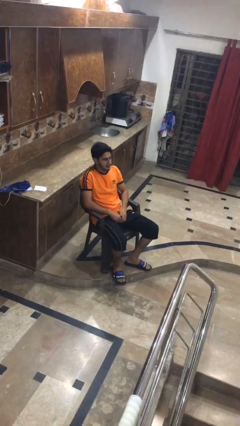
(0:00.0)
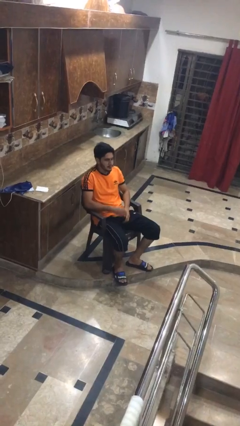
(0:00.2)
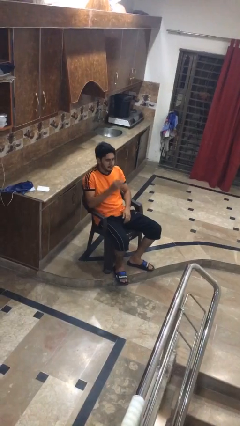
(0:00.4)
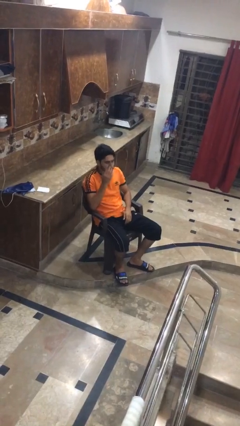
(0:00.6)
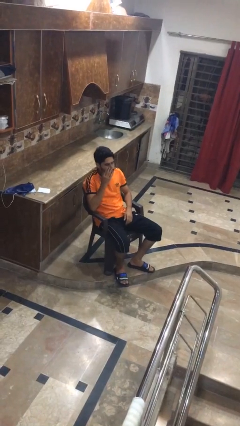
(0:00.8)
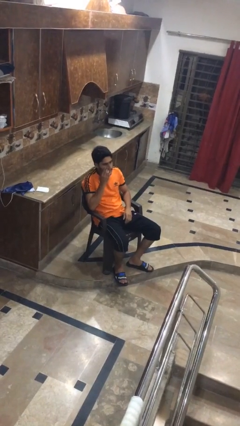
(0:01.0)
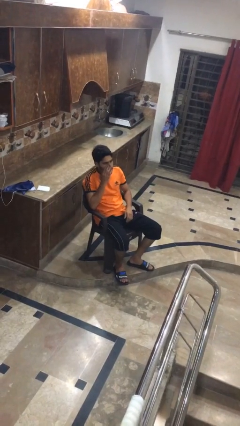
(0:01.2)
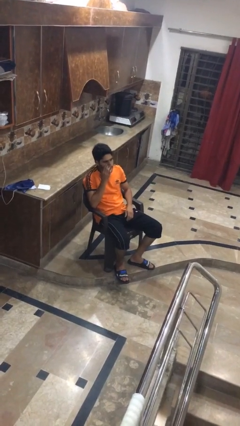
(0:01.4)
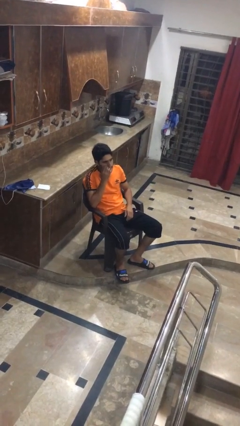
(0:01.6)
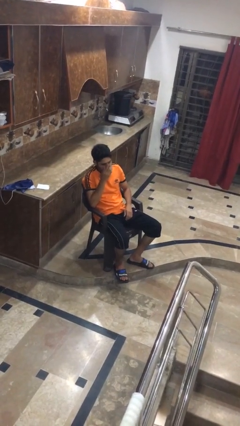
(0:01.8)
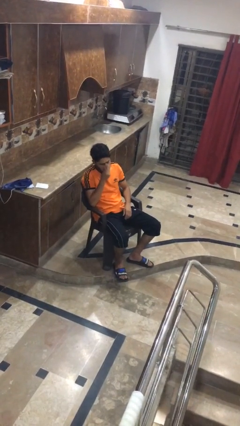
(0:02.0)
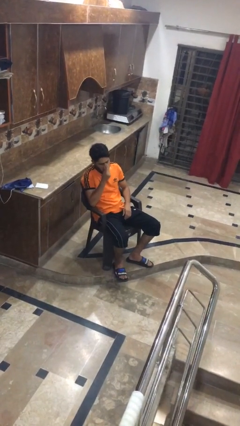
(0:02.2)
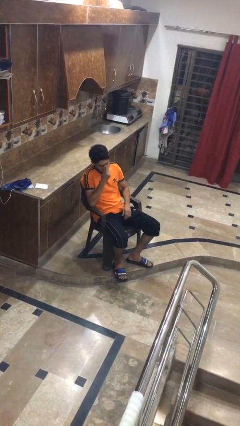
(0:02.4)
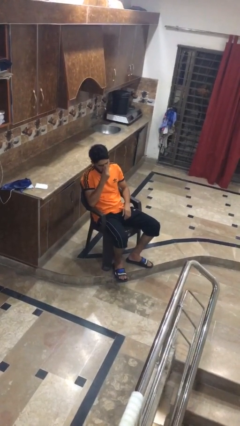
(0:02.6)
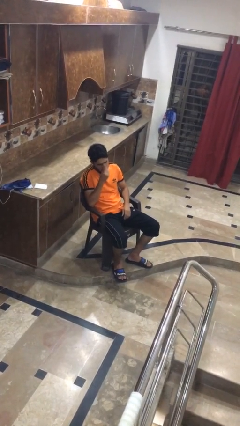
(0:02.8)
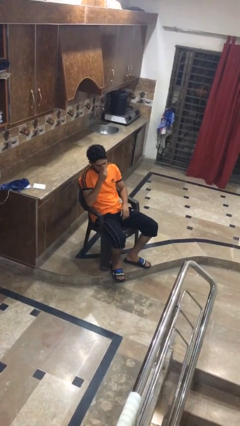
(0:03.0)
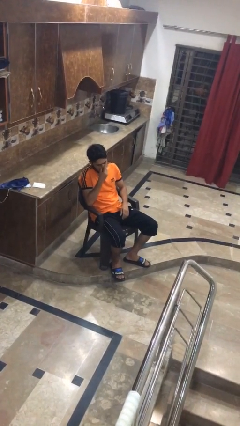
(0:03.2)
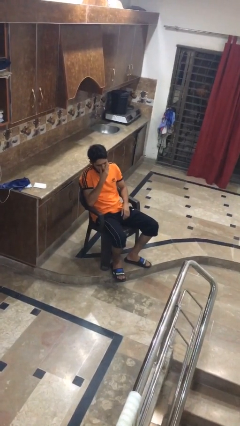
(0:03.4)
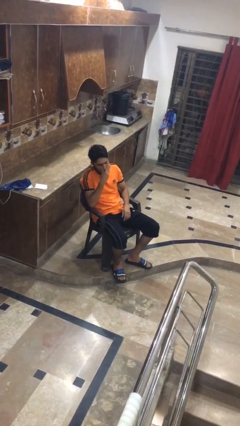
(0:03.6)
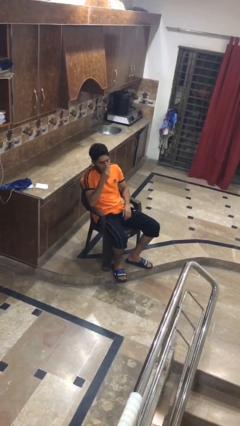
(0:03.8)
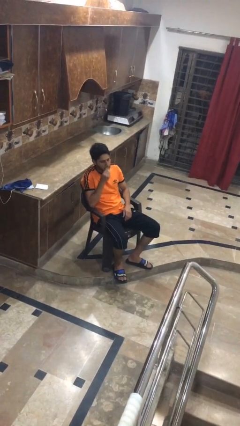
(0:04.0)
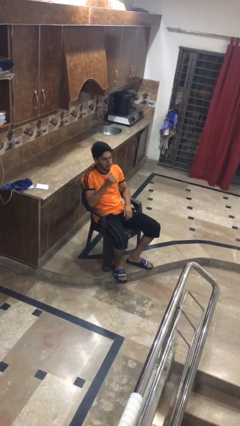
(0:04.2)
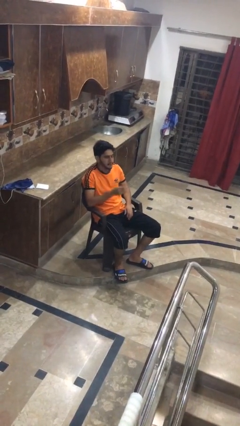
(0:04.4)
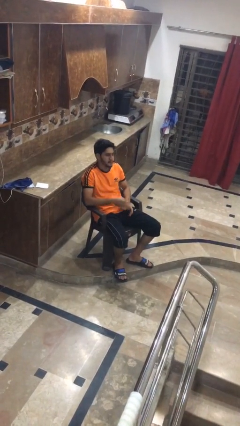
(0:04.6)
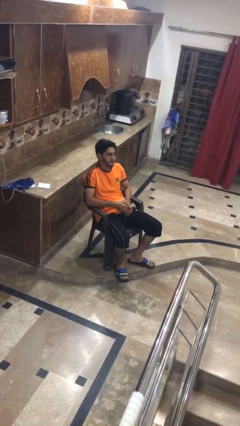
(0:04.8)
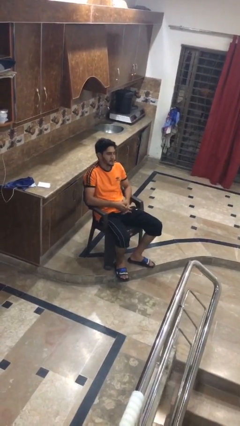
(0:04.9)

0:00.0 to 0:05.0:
person scratches face

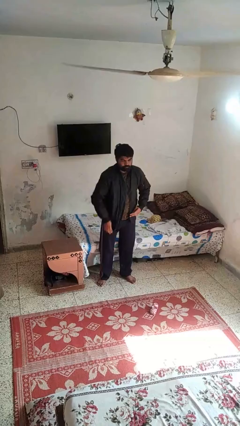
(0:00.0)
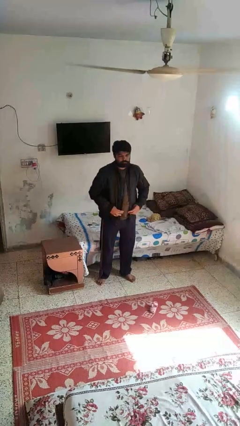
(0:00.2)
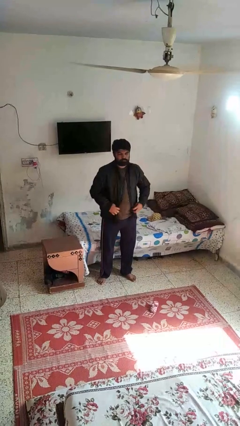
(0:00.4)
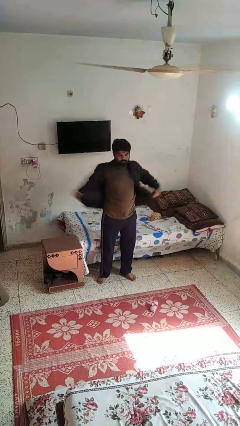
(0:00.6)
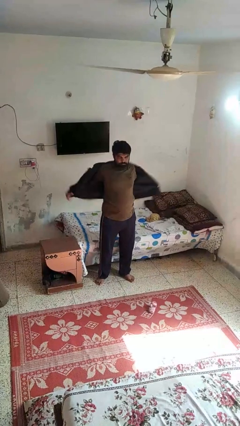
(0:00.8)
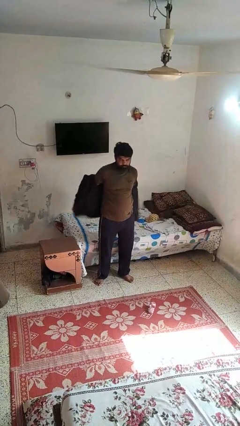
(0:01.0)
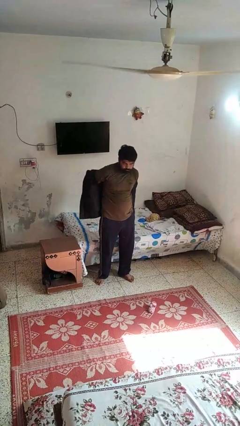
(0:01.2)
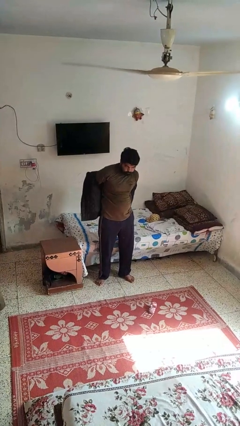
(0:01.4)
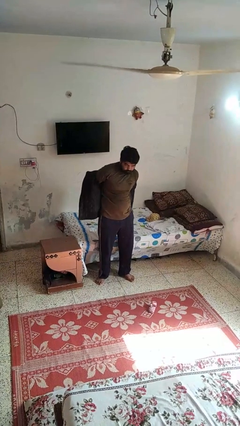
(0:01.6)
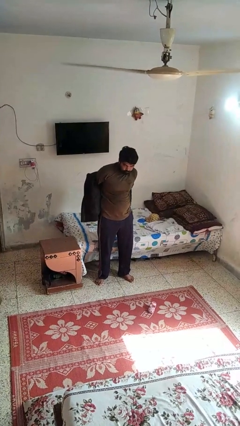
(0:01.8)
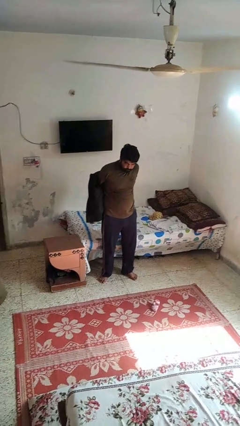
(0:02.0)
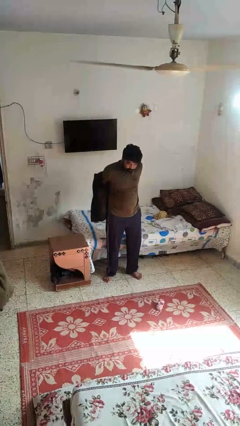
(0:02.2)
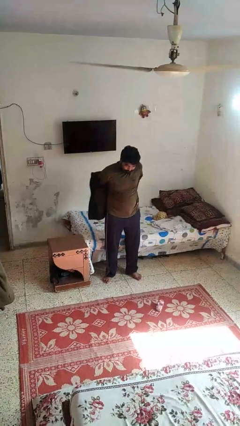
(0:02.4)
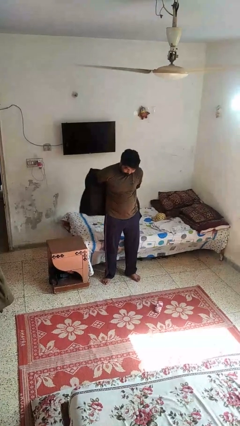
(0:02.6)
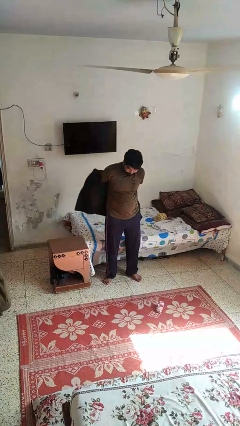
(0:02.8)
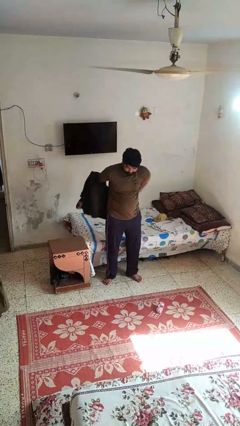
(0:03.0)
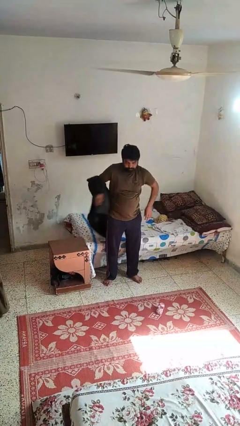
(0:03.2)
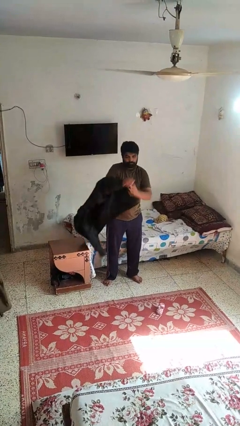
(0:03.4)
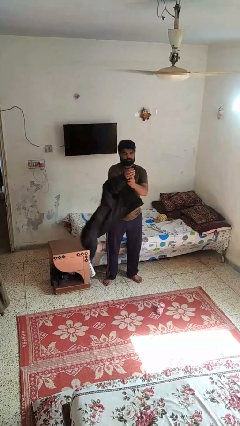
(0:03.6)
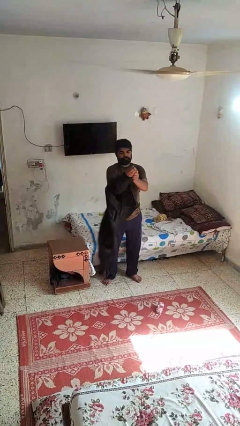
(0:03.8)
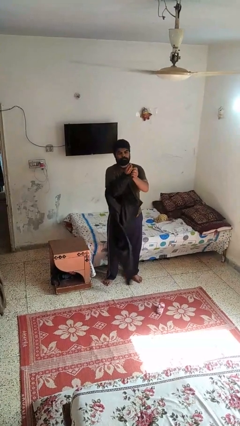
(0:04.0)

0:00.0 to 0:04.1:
person takes off jacket

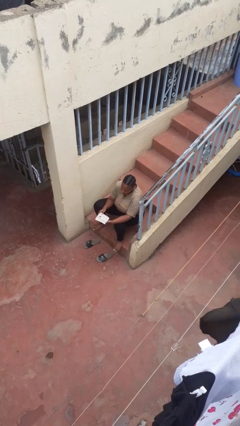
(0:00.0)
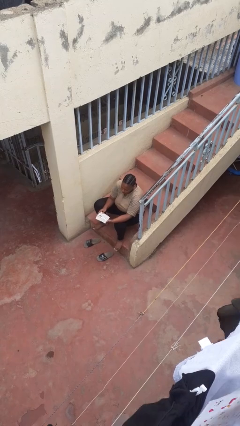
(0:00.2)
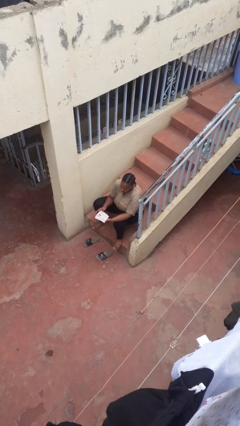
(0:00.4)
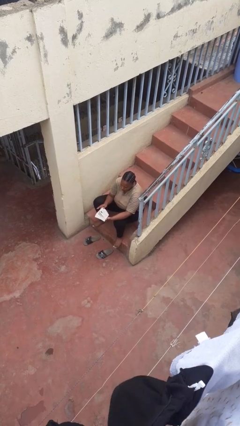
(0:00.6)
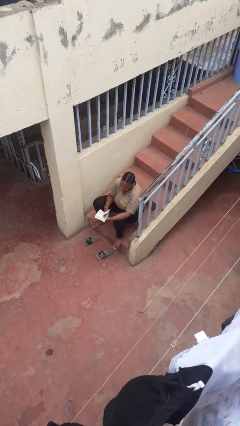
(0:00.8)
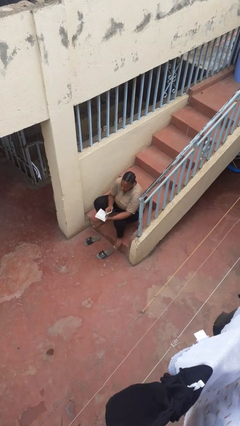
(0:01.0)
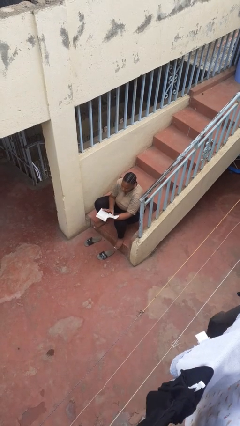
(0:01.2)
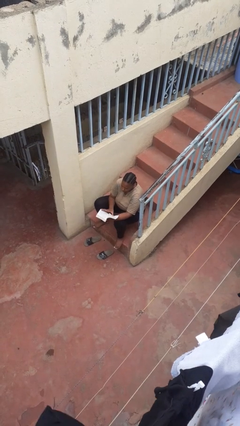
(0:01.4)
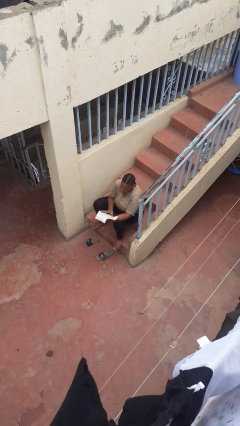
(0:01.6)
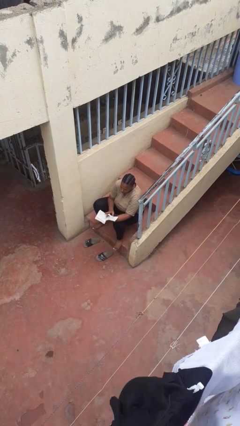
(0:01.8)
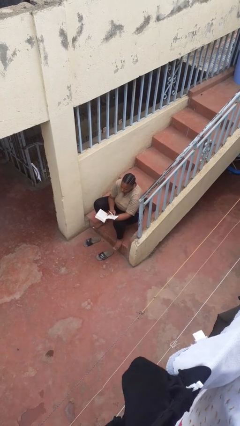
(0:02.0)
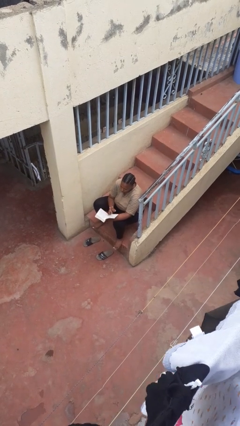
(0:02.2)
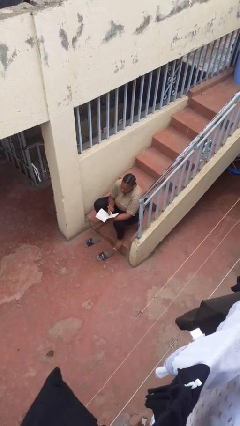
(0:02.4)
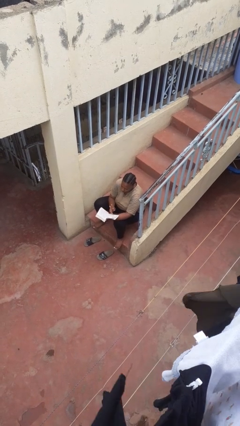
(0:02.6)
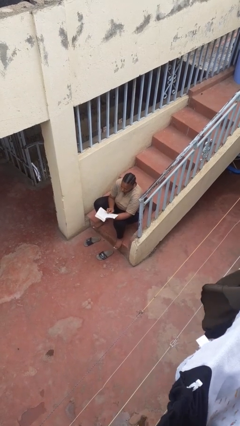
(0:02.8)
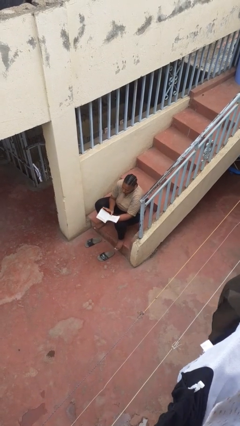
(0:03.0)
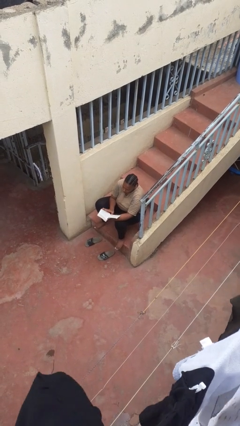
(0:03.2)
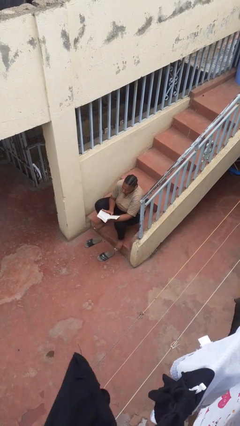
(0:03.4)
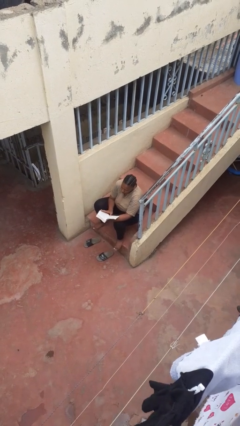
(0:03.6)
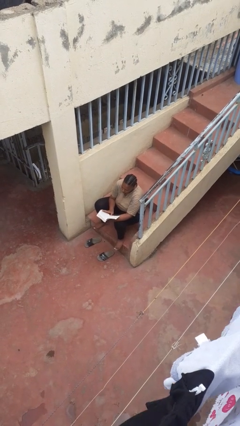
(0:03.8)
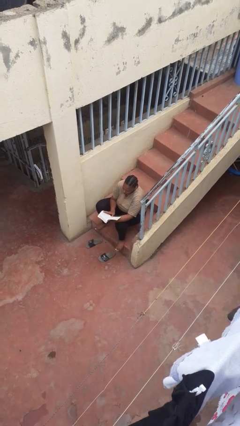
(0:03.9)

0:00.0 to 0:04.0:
person reads book

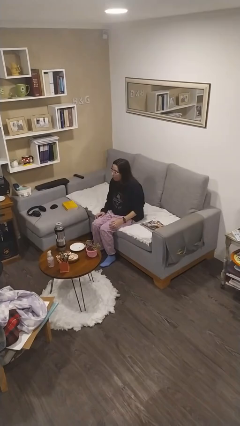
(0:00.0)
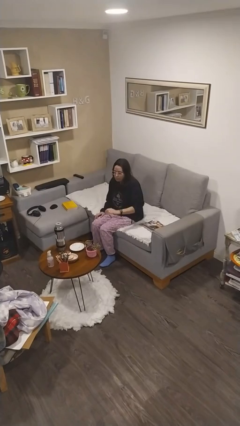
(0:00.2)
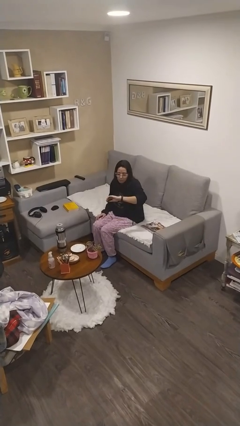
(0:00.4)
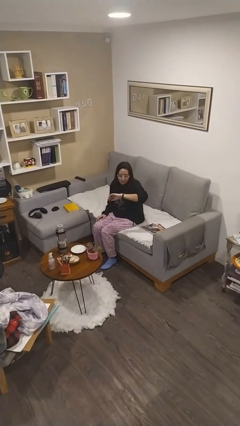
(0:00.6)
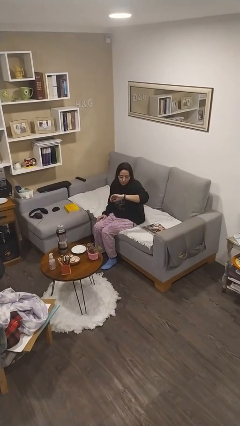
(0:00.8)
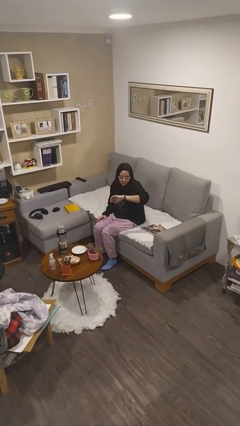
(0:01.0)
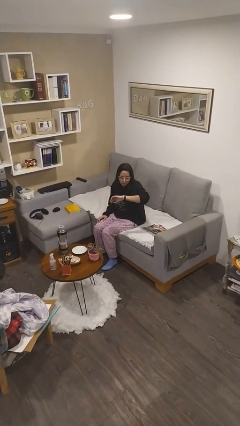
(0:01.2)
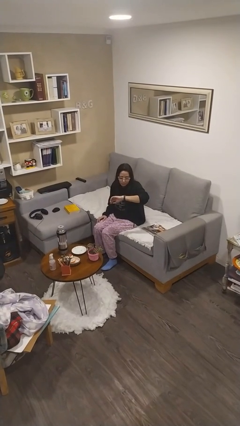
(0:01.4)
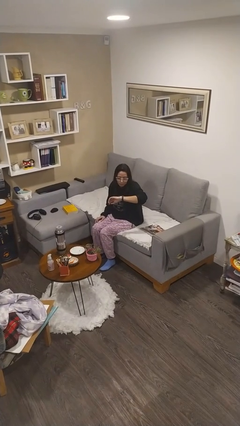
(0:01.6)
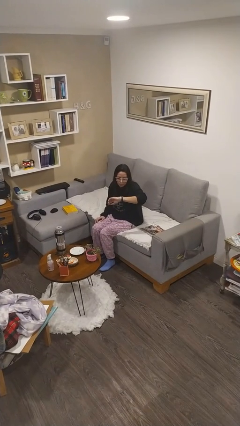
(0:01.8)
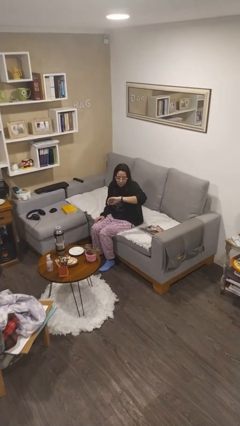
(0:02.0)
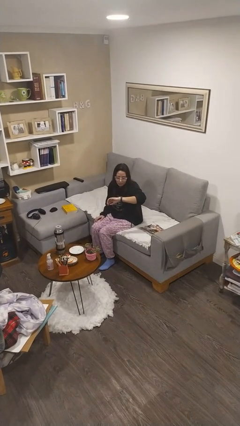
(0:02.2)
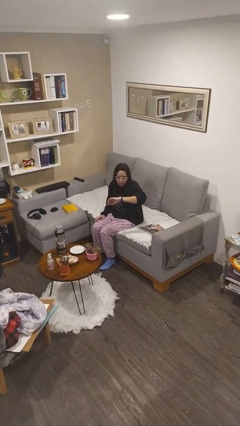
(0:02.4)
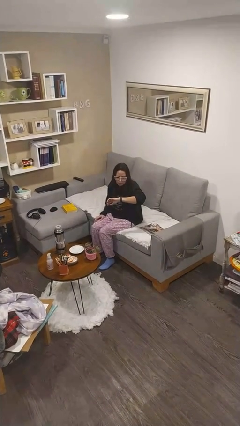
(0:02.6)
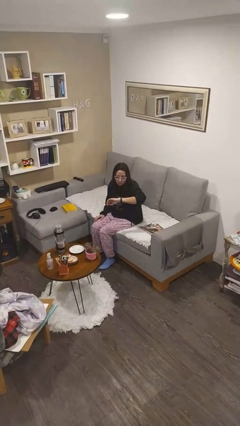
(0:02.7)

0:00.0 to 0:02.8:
person looks at wristwatch

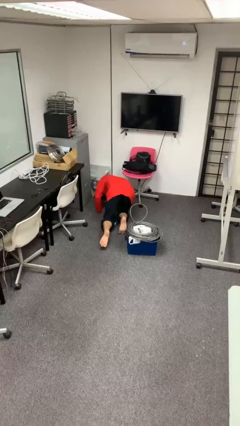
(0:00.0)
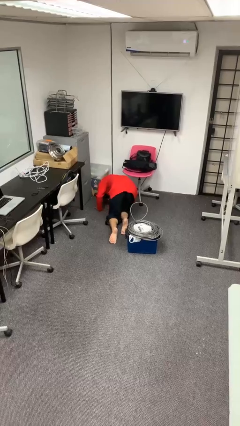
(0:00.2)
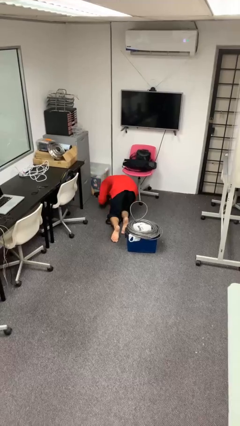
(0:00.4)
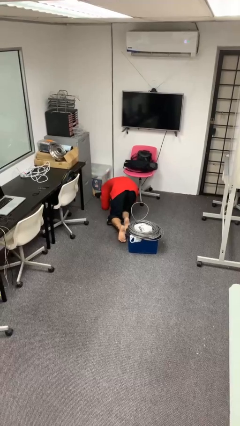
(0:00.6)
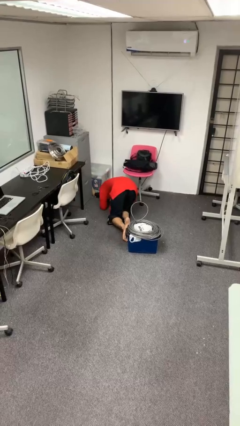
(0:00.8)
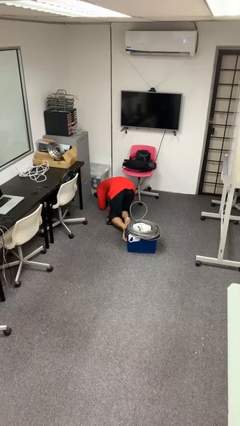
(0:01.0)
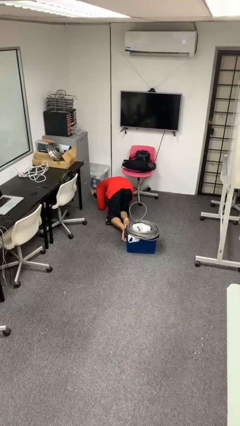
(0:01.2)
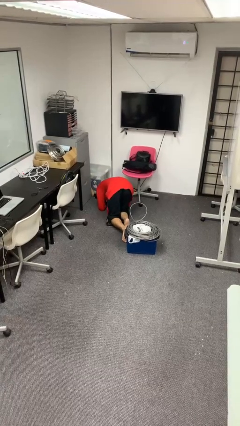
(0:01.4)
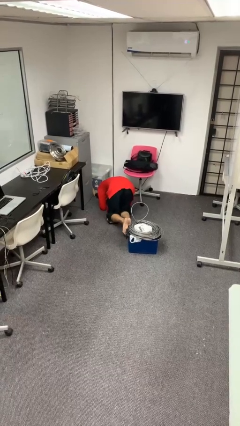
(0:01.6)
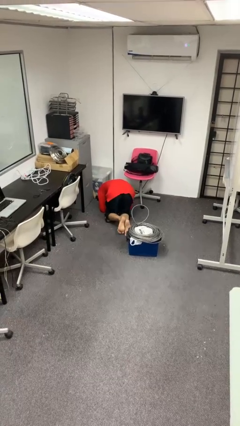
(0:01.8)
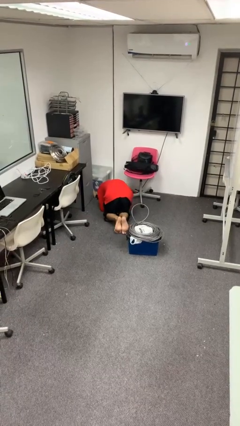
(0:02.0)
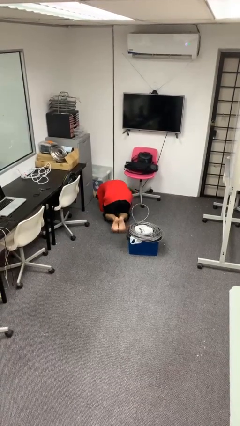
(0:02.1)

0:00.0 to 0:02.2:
person lies down on floor
